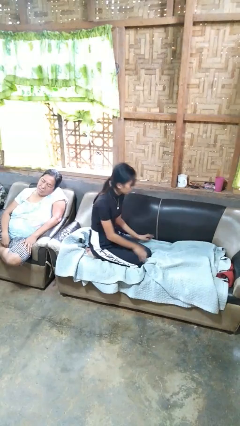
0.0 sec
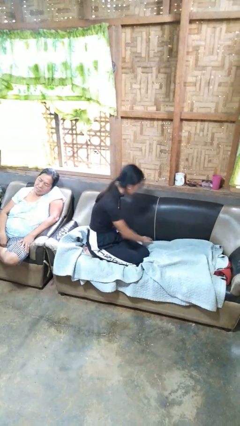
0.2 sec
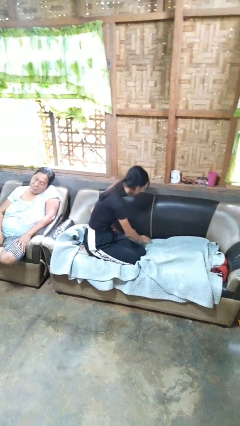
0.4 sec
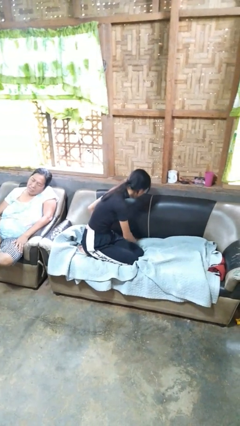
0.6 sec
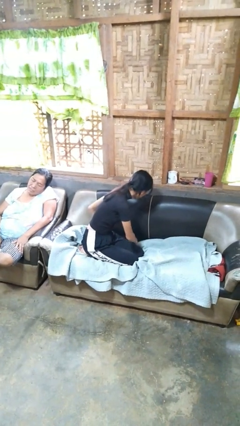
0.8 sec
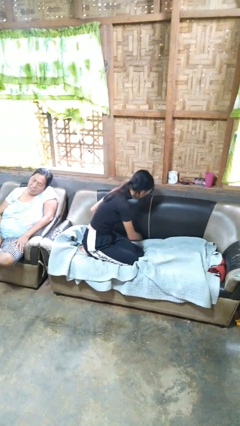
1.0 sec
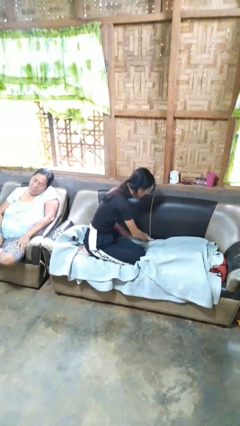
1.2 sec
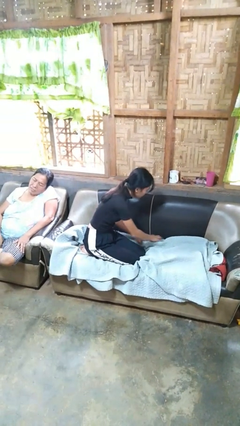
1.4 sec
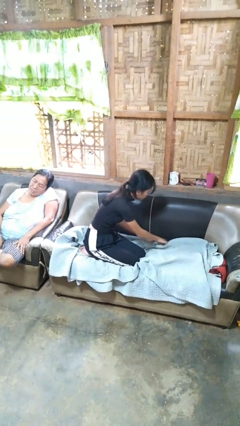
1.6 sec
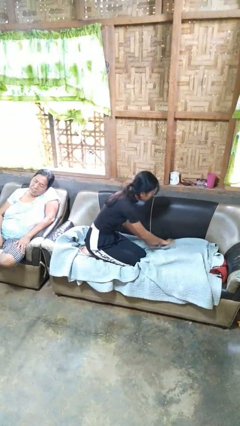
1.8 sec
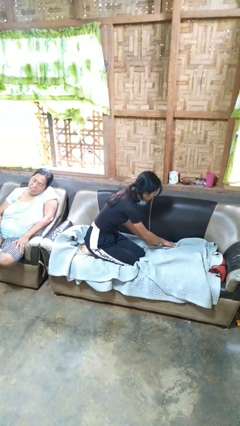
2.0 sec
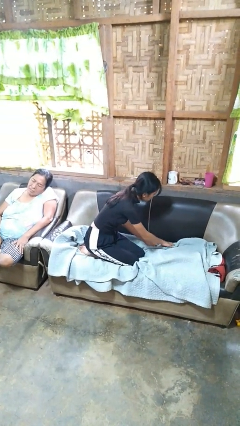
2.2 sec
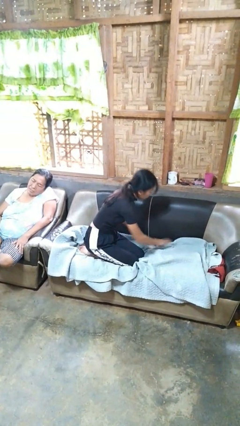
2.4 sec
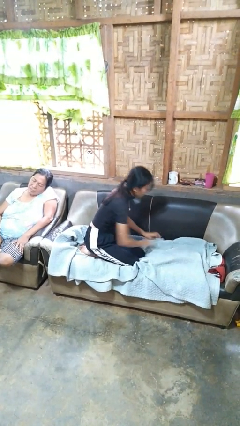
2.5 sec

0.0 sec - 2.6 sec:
person searches in couch

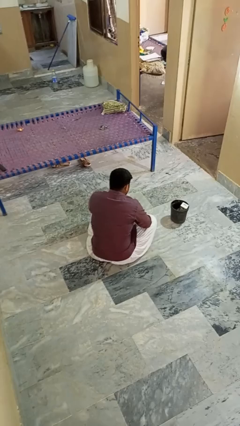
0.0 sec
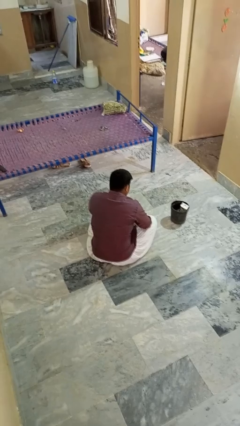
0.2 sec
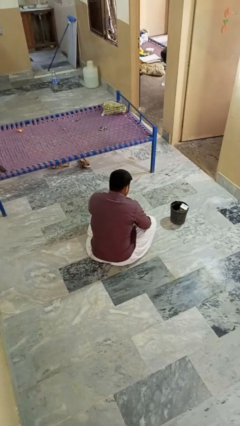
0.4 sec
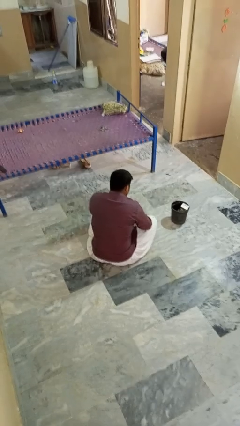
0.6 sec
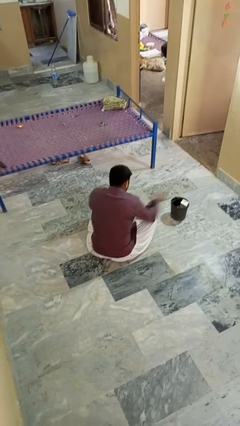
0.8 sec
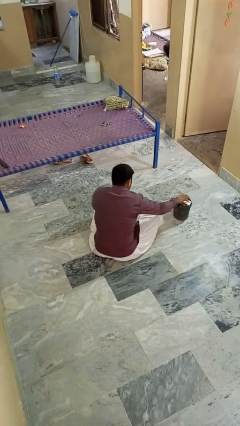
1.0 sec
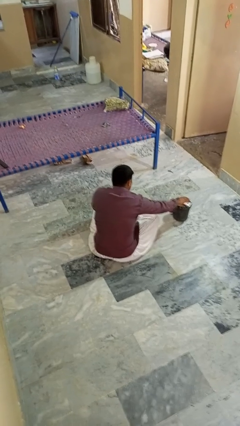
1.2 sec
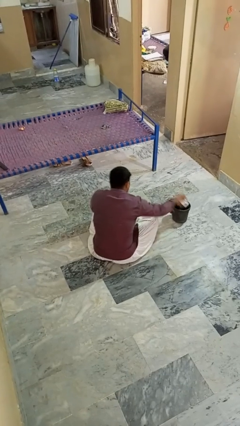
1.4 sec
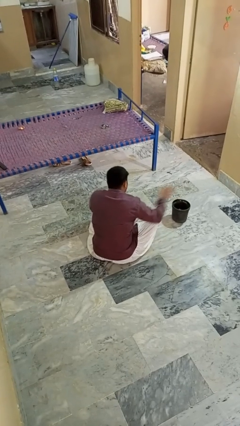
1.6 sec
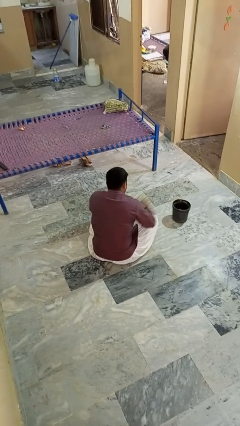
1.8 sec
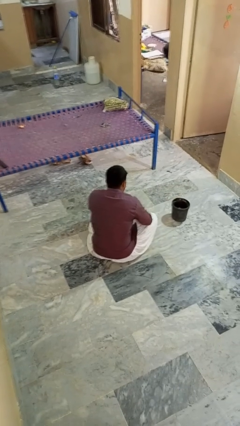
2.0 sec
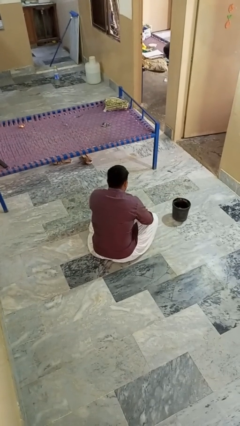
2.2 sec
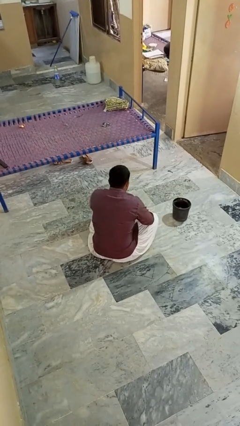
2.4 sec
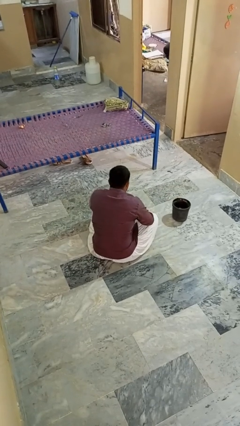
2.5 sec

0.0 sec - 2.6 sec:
person takes object from basket

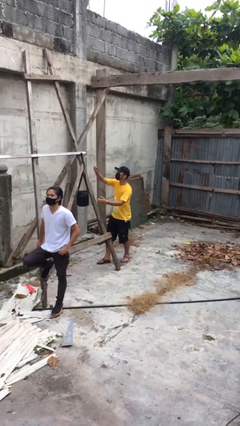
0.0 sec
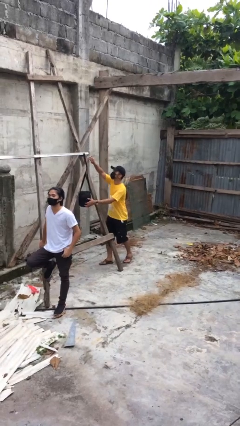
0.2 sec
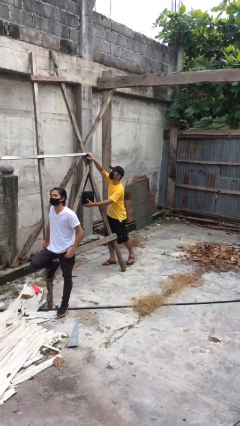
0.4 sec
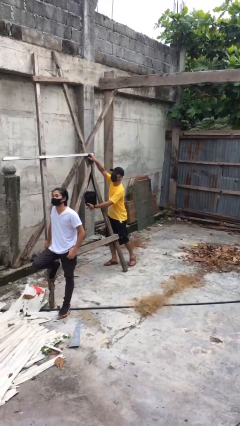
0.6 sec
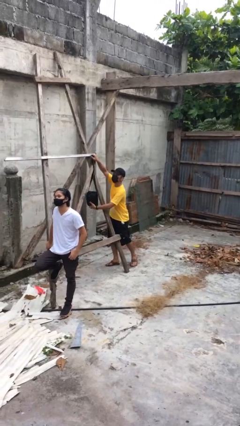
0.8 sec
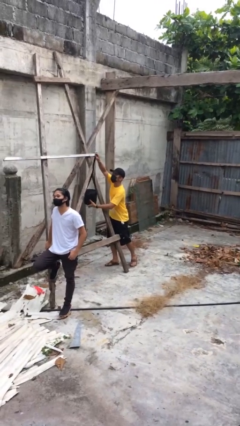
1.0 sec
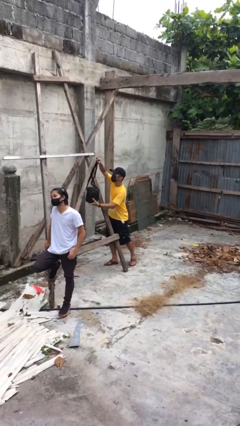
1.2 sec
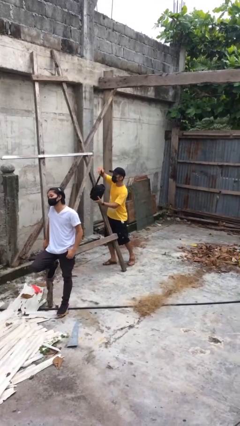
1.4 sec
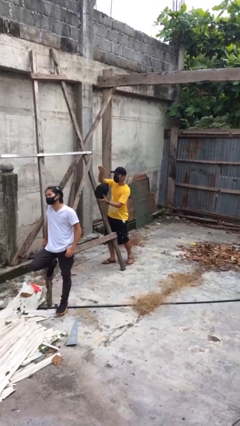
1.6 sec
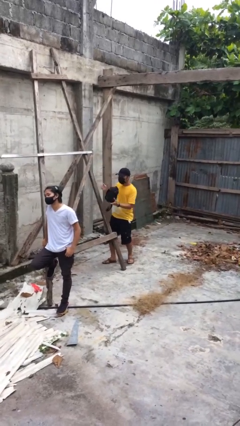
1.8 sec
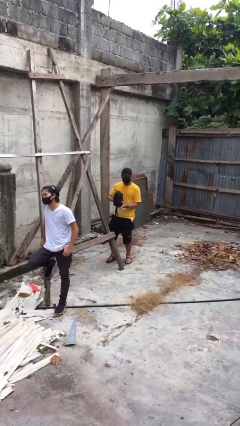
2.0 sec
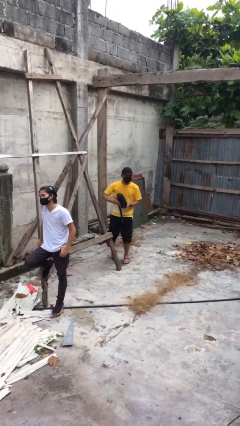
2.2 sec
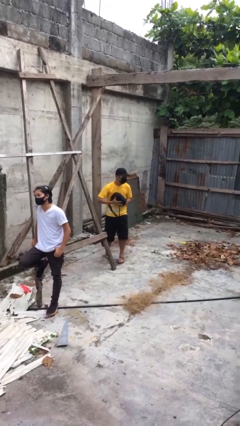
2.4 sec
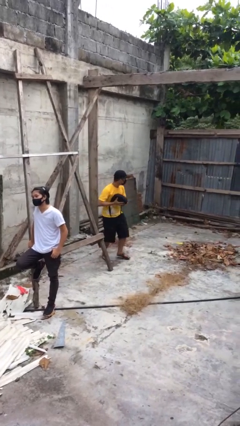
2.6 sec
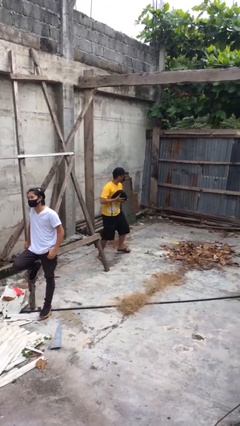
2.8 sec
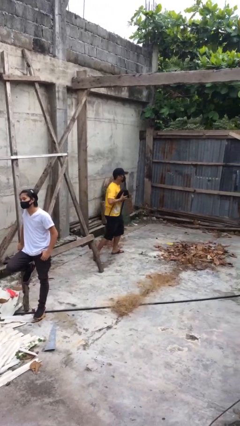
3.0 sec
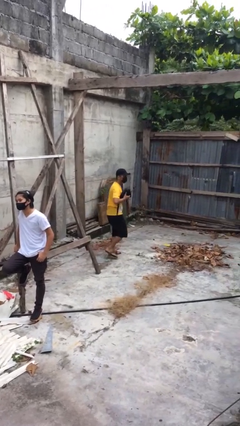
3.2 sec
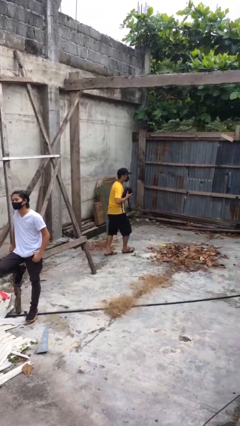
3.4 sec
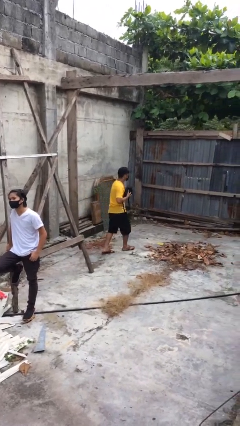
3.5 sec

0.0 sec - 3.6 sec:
person steals object from person

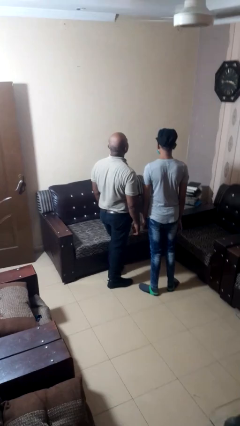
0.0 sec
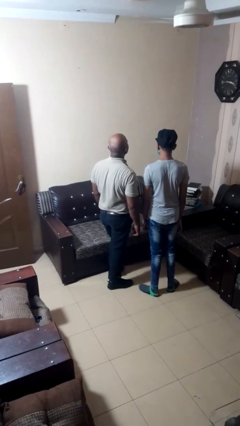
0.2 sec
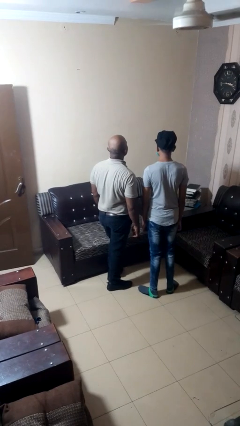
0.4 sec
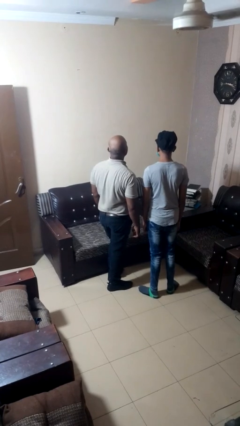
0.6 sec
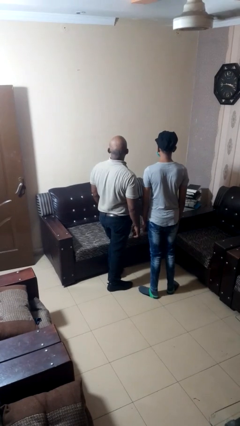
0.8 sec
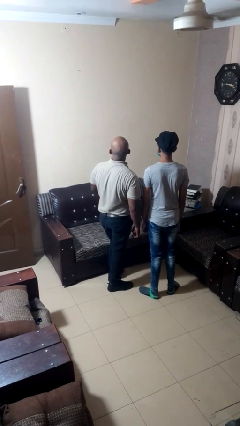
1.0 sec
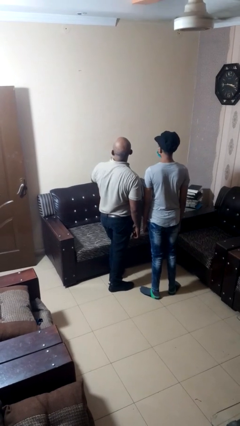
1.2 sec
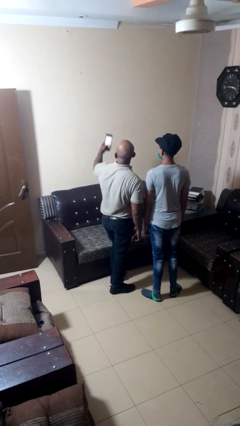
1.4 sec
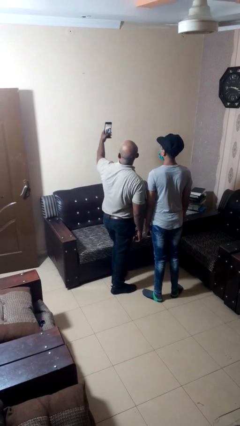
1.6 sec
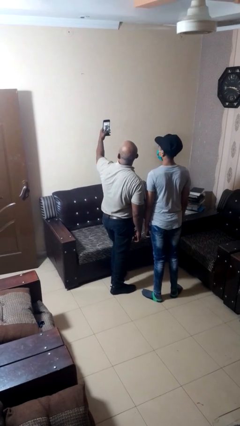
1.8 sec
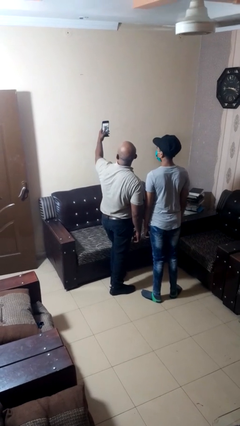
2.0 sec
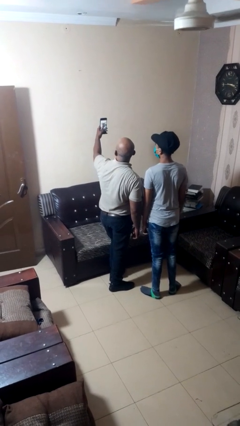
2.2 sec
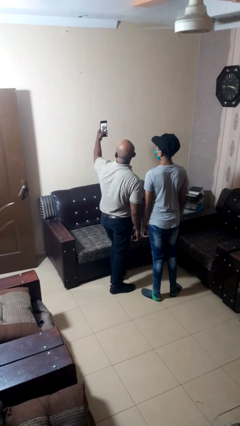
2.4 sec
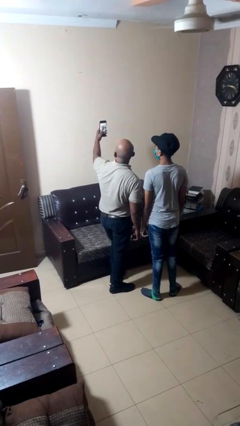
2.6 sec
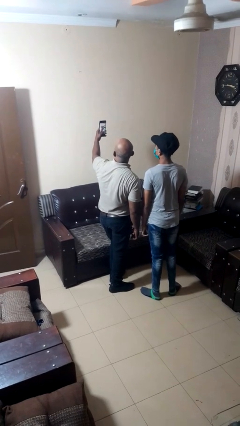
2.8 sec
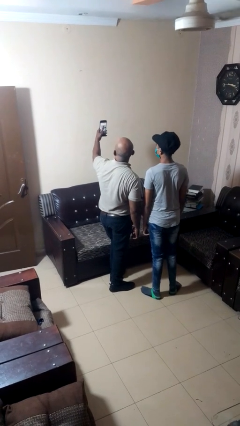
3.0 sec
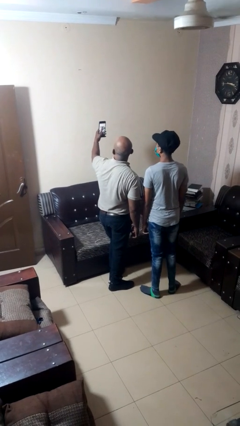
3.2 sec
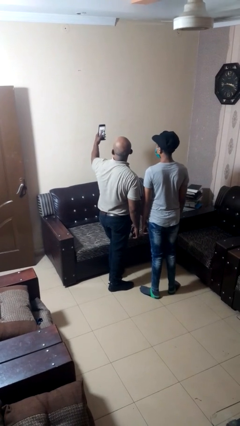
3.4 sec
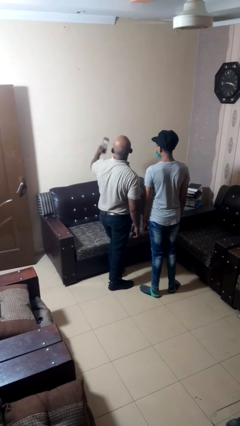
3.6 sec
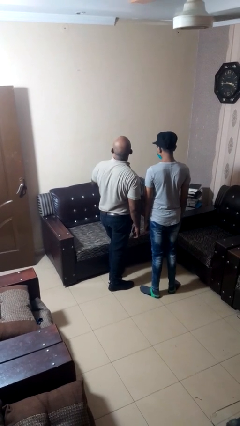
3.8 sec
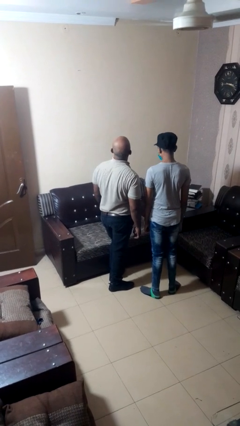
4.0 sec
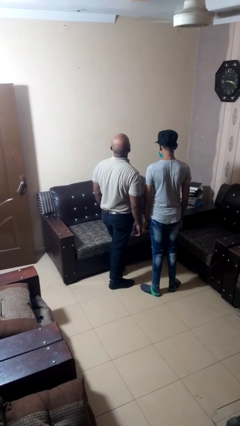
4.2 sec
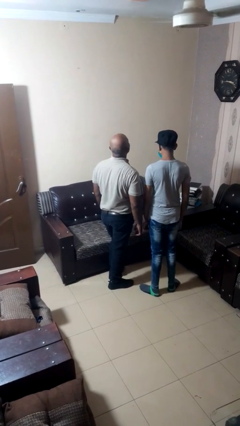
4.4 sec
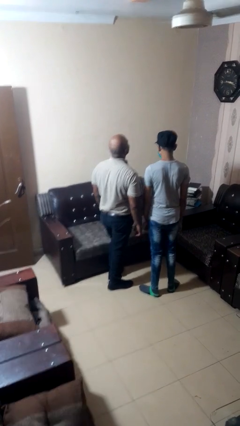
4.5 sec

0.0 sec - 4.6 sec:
person takes selfie with person

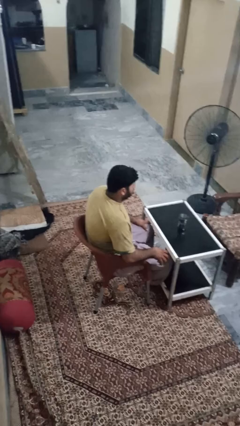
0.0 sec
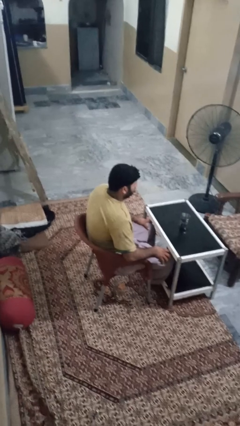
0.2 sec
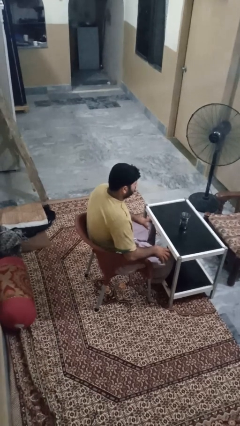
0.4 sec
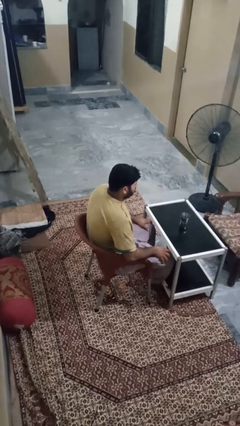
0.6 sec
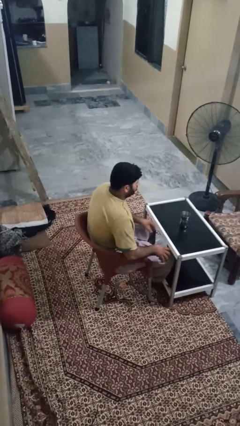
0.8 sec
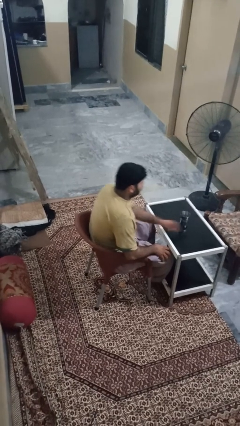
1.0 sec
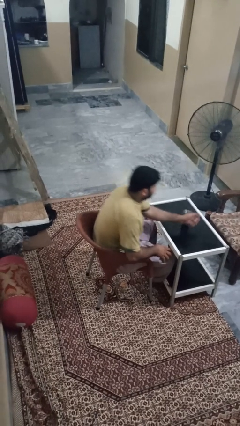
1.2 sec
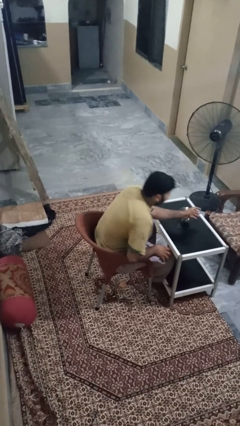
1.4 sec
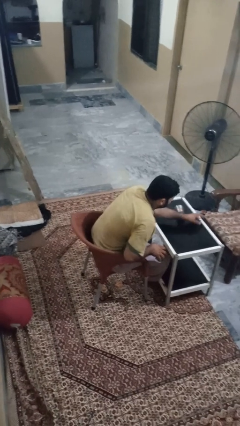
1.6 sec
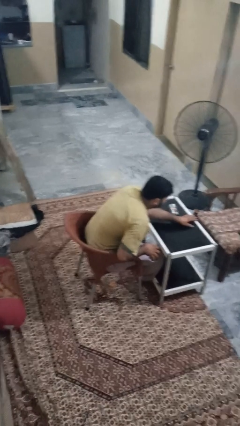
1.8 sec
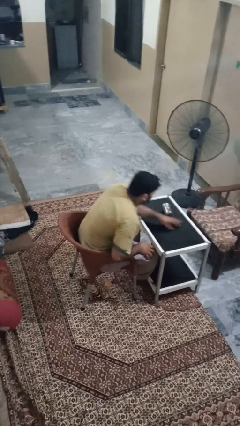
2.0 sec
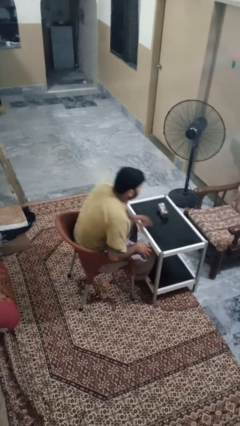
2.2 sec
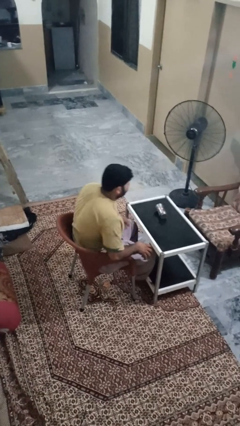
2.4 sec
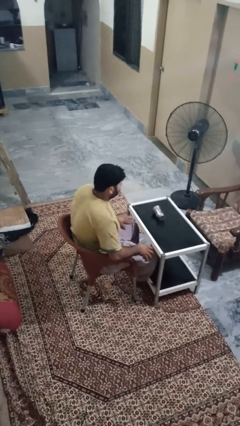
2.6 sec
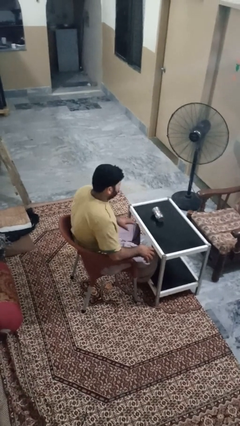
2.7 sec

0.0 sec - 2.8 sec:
person knocks over glass

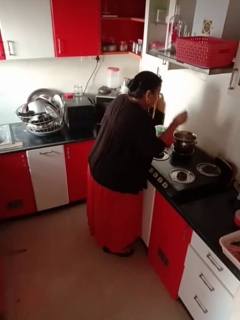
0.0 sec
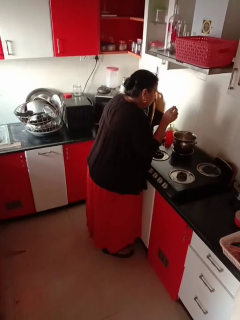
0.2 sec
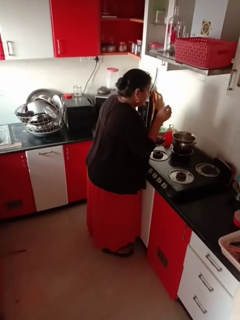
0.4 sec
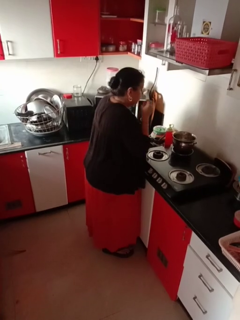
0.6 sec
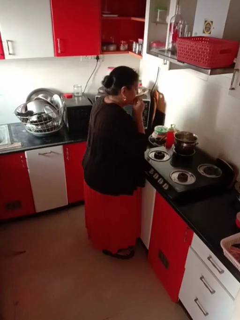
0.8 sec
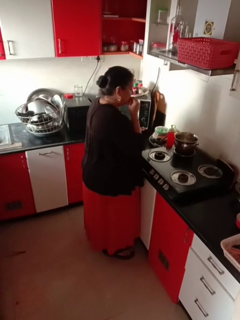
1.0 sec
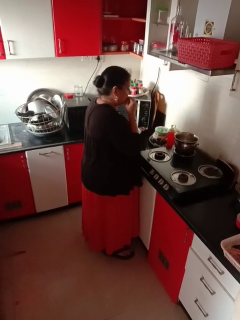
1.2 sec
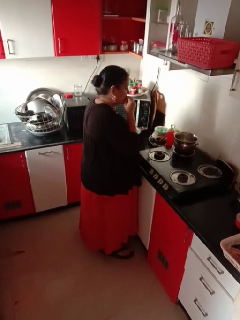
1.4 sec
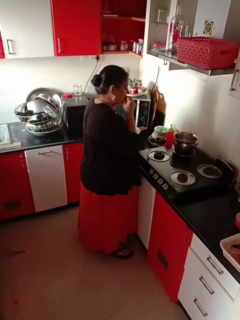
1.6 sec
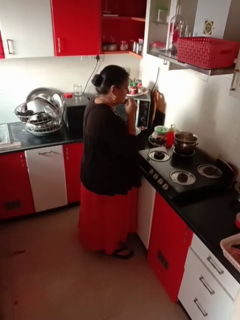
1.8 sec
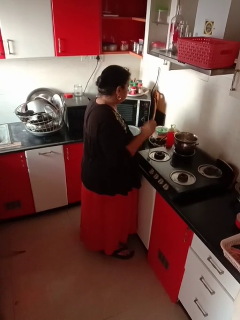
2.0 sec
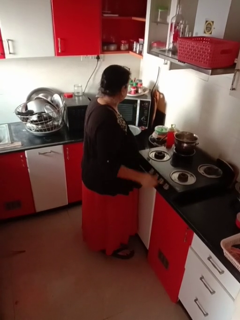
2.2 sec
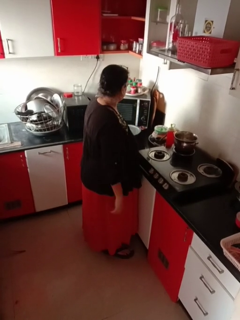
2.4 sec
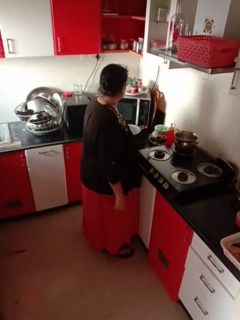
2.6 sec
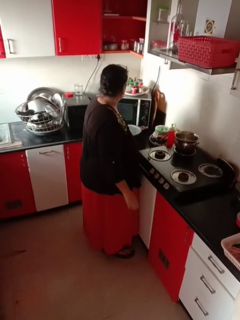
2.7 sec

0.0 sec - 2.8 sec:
person burns hand
